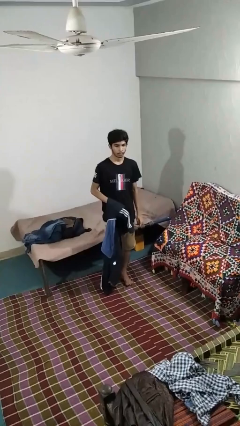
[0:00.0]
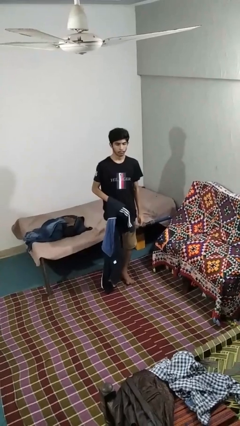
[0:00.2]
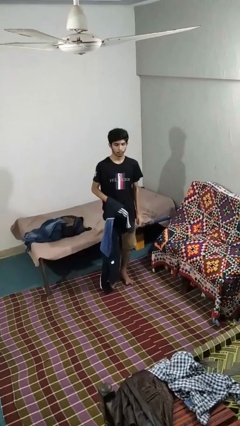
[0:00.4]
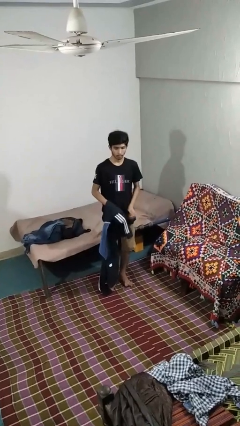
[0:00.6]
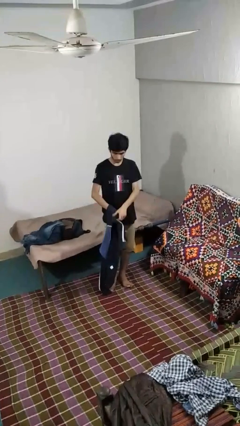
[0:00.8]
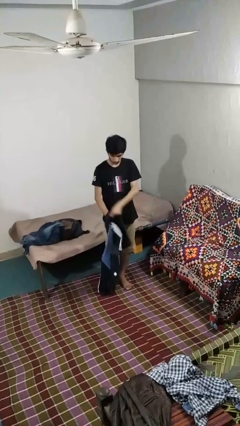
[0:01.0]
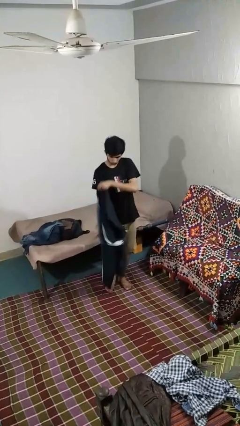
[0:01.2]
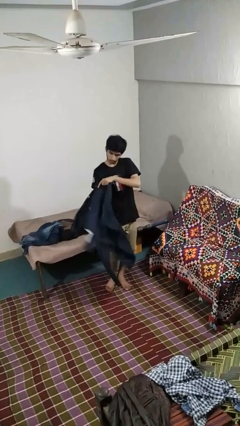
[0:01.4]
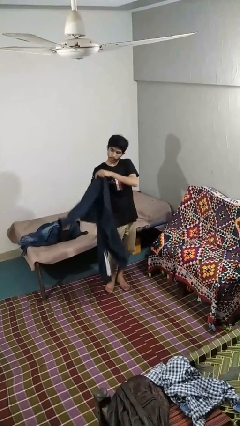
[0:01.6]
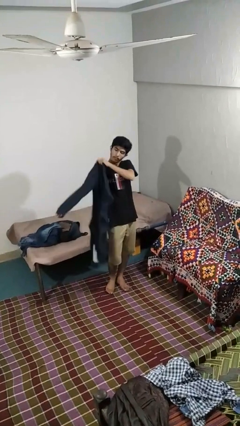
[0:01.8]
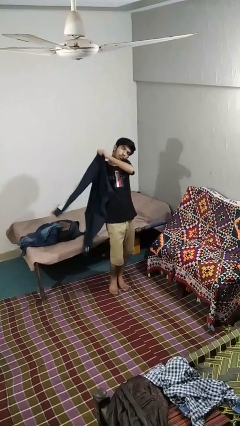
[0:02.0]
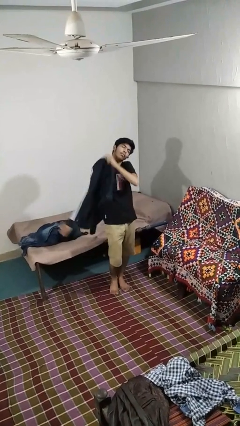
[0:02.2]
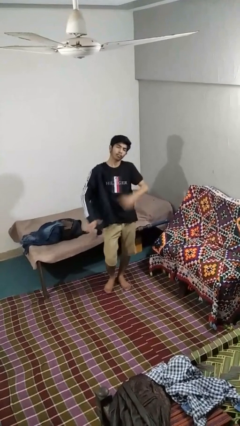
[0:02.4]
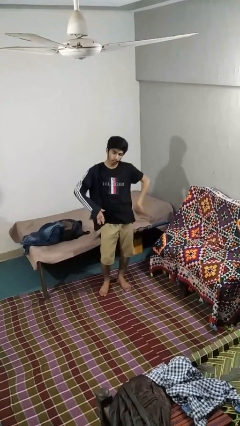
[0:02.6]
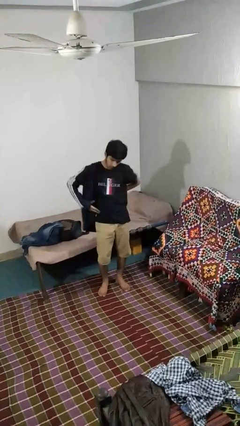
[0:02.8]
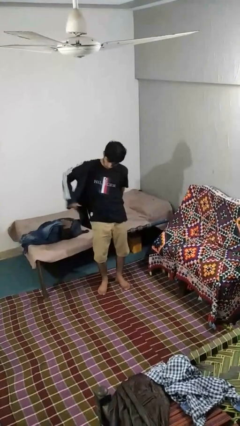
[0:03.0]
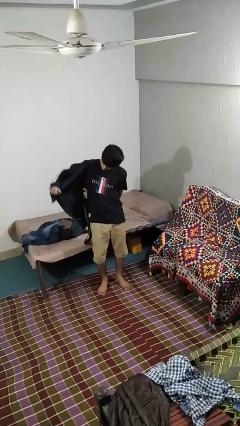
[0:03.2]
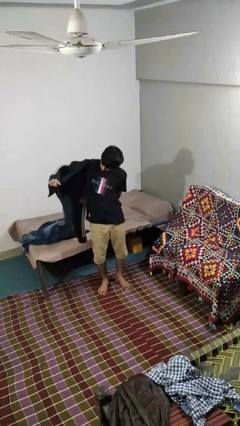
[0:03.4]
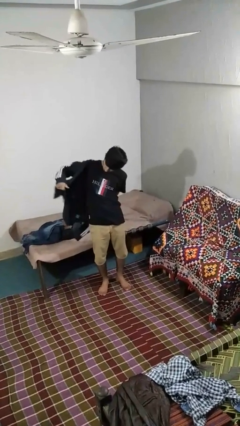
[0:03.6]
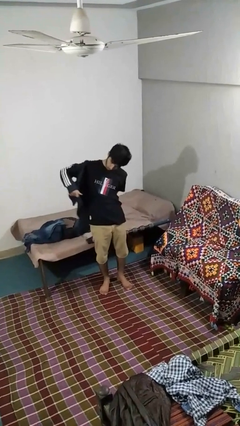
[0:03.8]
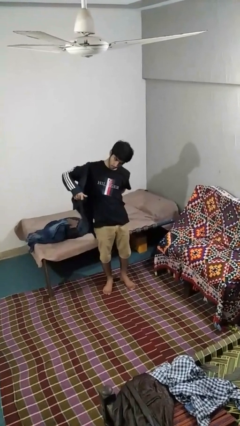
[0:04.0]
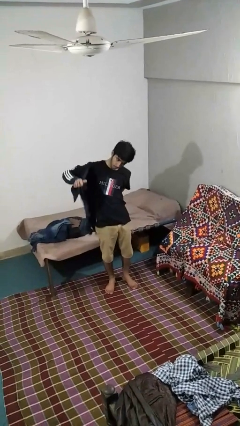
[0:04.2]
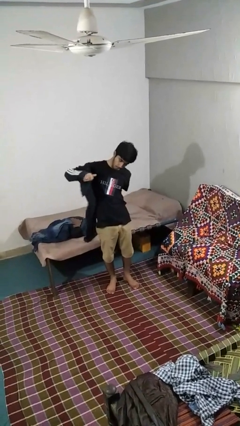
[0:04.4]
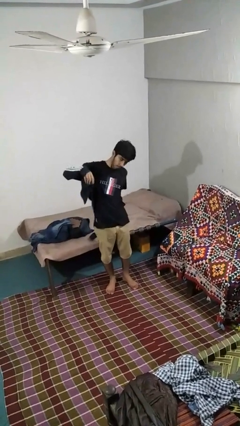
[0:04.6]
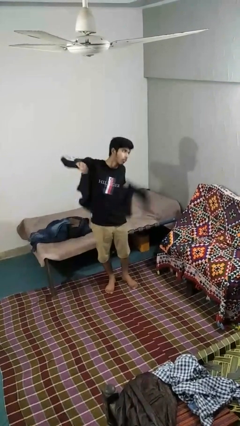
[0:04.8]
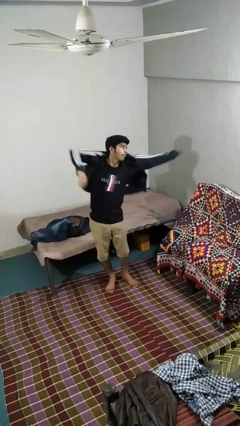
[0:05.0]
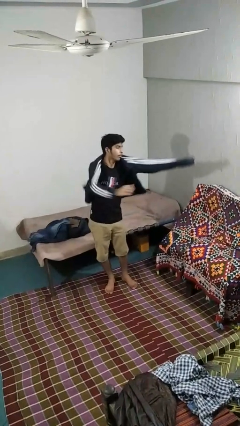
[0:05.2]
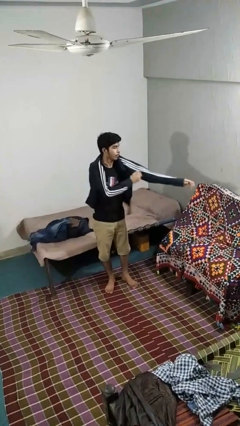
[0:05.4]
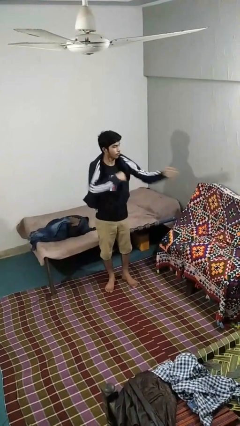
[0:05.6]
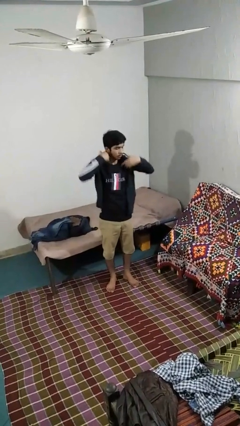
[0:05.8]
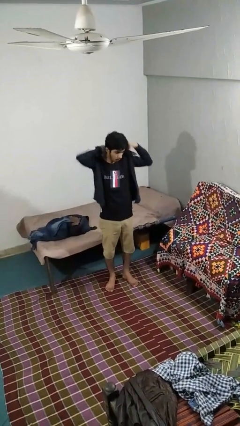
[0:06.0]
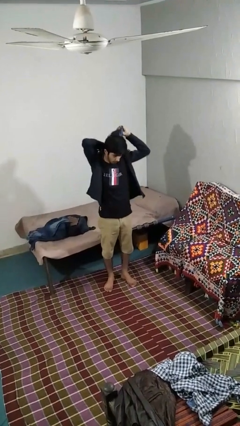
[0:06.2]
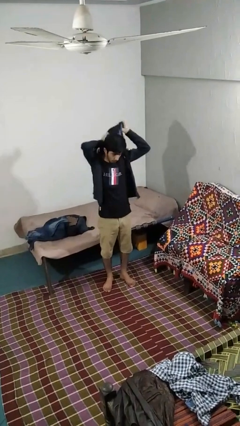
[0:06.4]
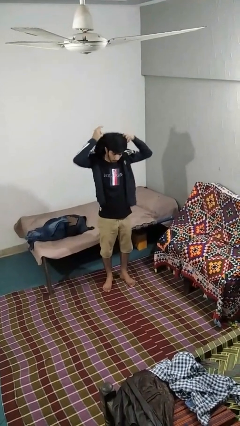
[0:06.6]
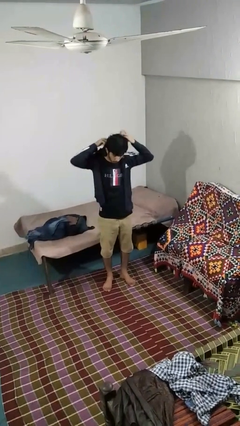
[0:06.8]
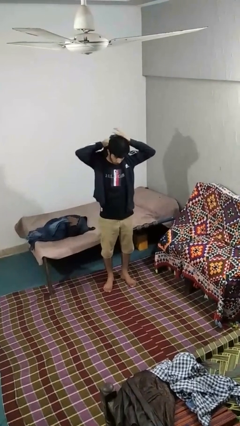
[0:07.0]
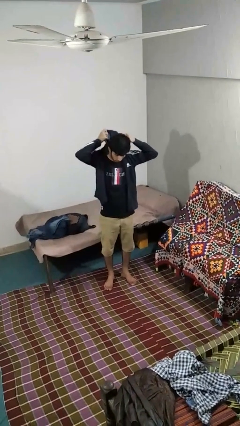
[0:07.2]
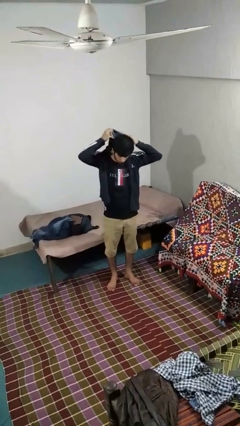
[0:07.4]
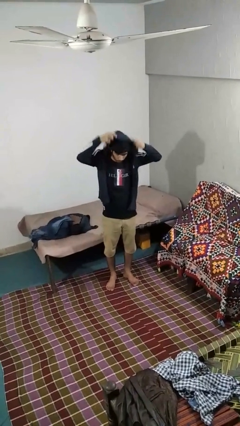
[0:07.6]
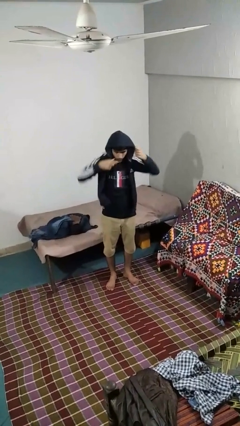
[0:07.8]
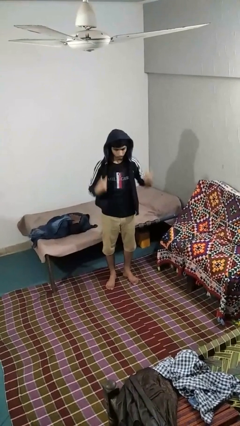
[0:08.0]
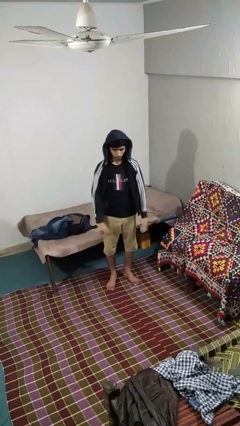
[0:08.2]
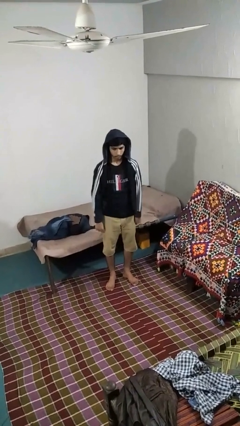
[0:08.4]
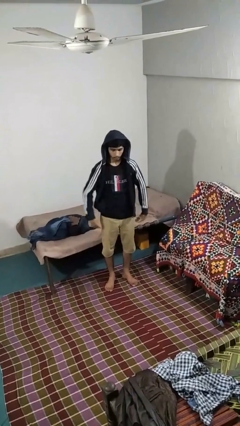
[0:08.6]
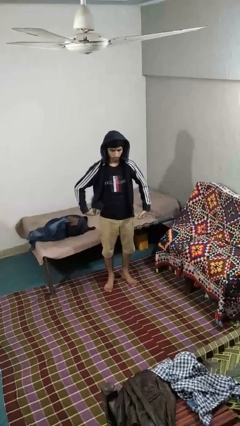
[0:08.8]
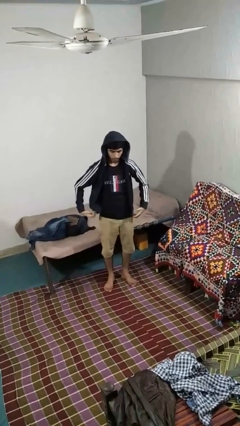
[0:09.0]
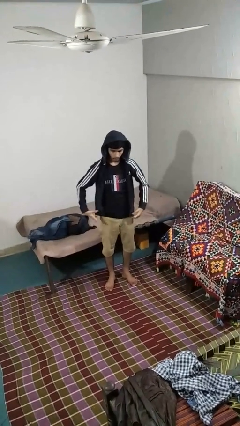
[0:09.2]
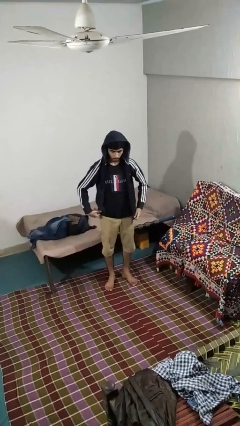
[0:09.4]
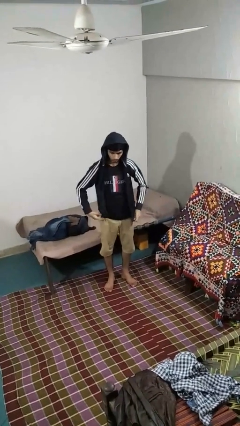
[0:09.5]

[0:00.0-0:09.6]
person puts on hoodie

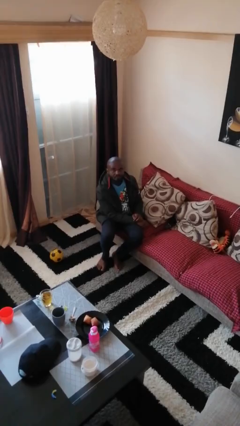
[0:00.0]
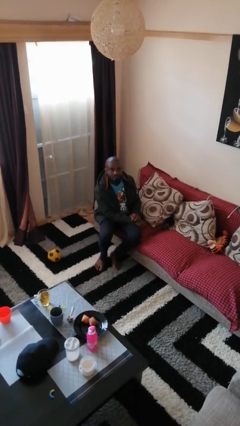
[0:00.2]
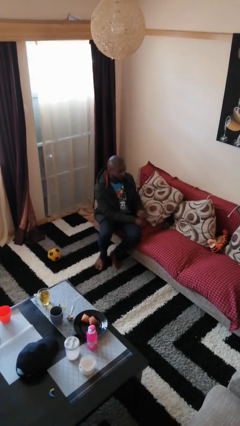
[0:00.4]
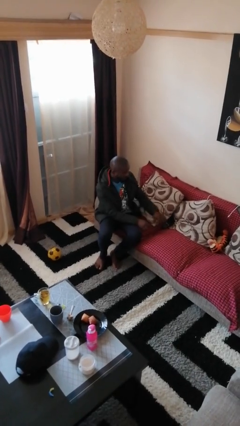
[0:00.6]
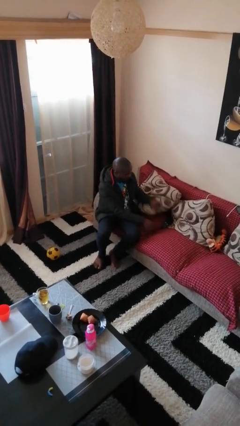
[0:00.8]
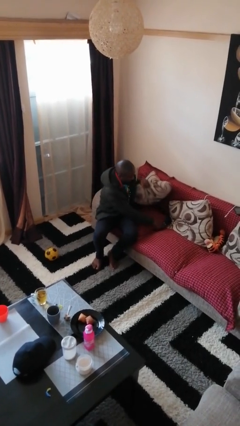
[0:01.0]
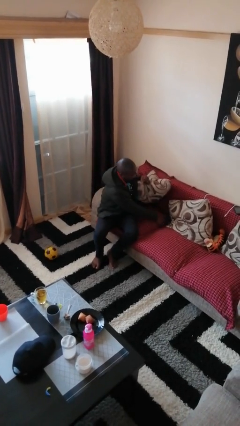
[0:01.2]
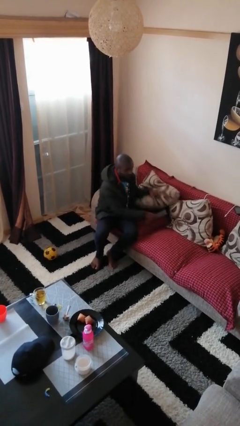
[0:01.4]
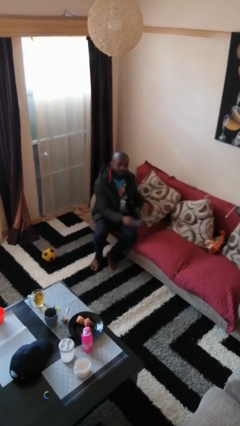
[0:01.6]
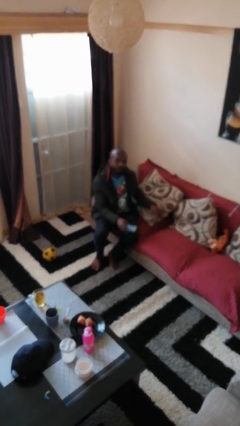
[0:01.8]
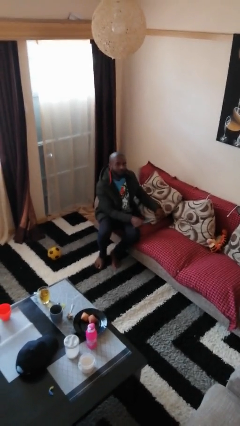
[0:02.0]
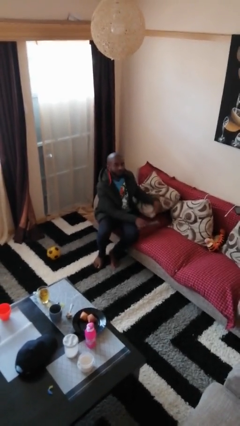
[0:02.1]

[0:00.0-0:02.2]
person searches in couch

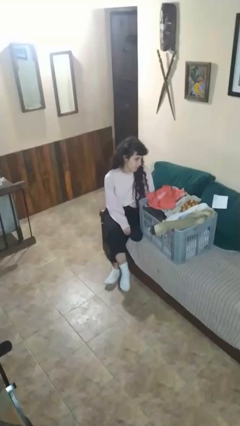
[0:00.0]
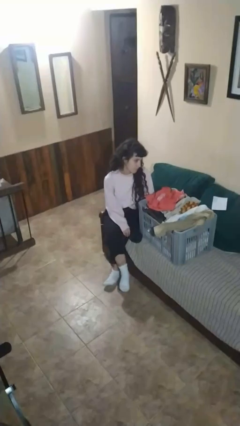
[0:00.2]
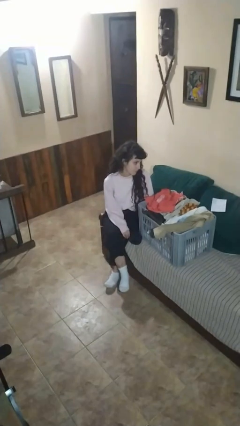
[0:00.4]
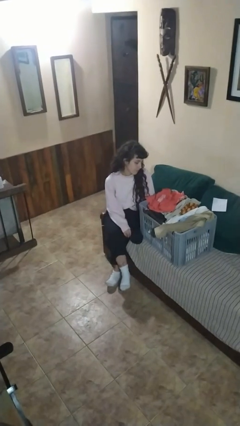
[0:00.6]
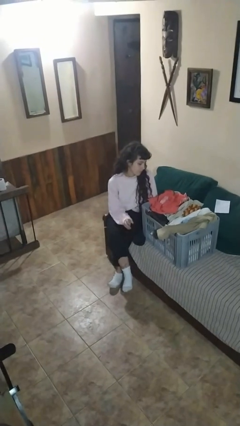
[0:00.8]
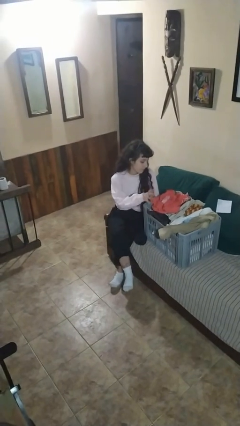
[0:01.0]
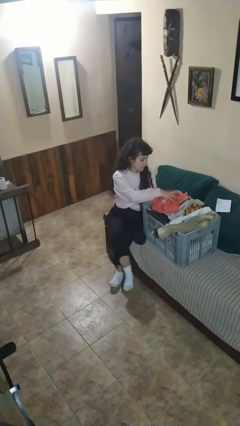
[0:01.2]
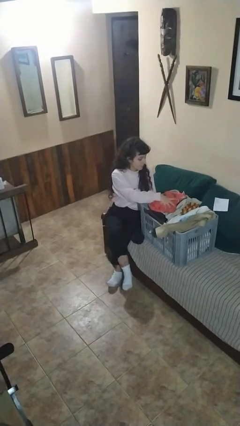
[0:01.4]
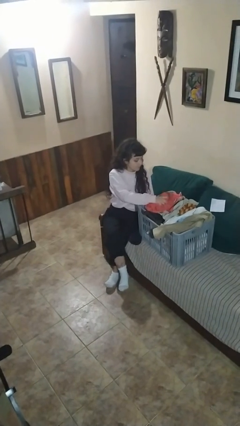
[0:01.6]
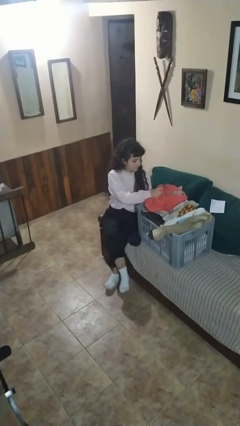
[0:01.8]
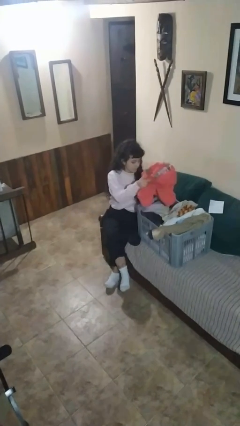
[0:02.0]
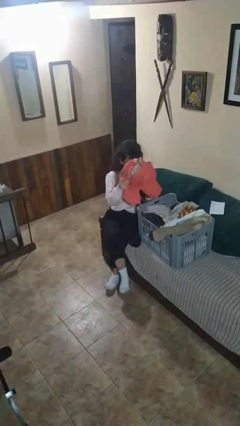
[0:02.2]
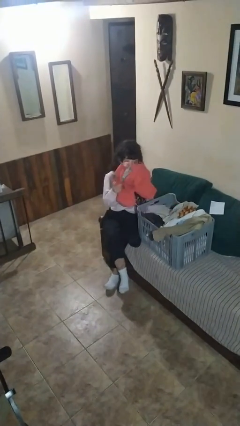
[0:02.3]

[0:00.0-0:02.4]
person takes object from basket

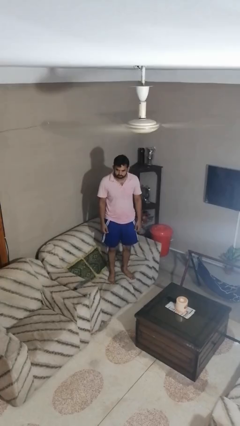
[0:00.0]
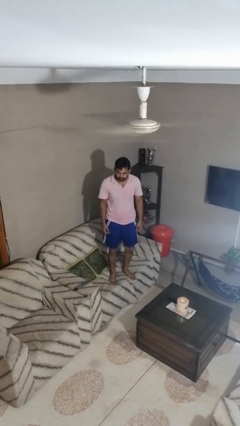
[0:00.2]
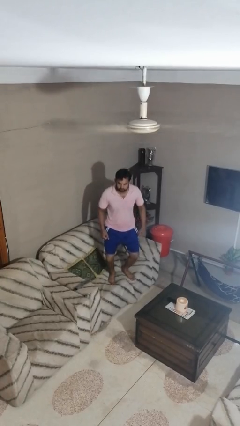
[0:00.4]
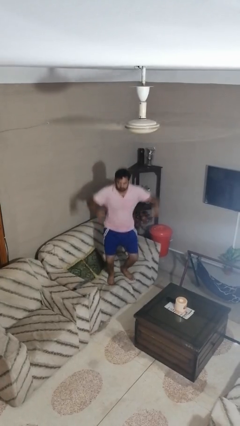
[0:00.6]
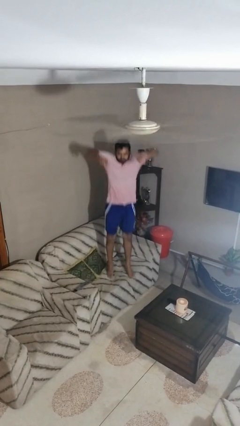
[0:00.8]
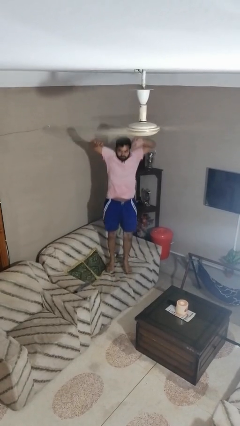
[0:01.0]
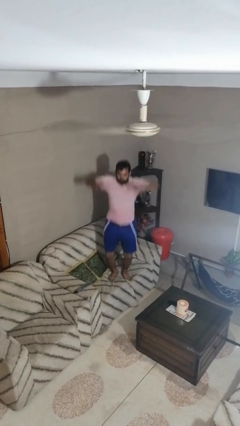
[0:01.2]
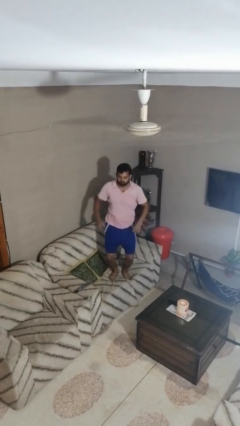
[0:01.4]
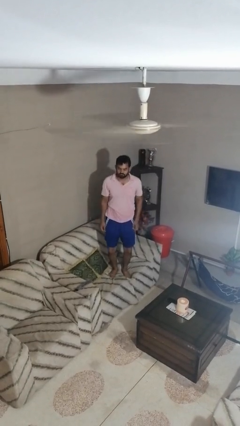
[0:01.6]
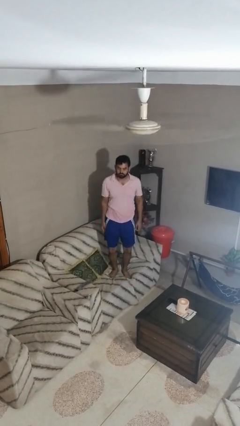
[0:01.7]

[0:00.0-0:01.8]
person jumps on couch

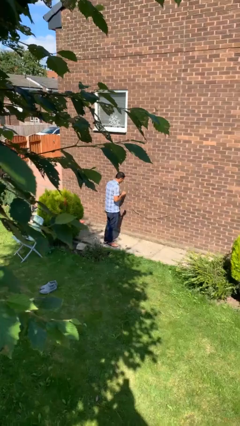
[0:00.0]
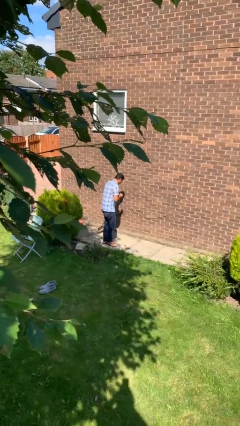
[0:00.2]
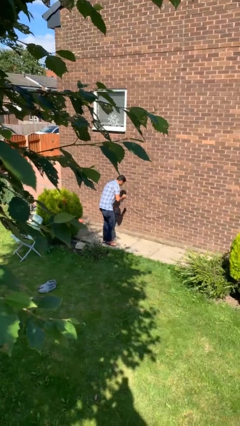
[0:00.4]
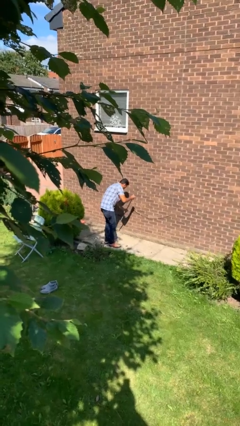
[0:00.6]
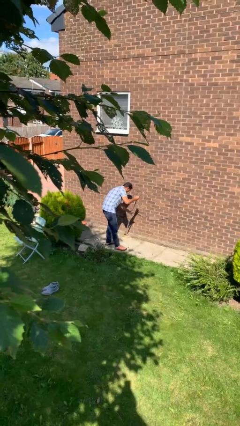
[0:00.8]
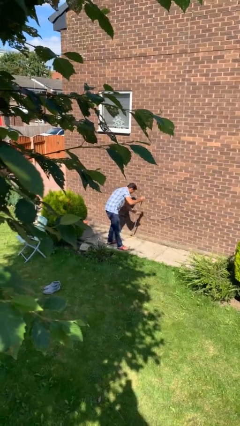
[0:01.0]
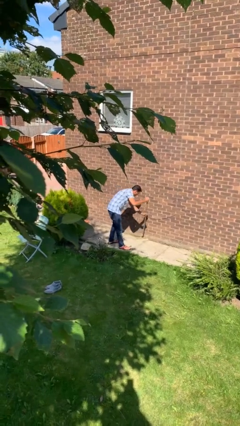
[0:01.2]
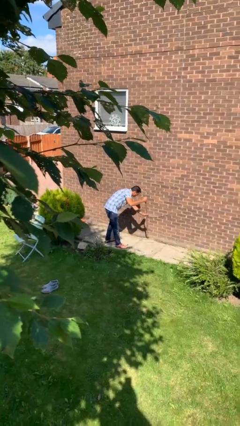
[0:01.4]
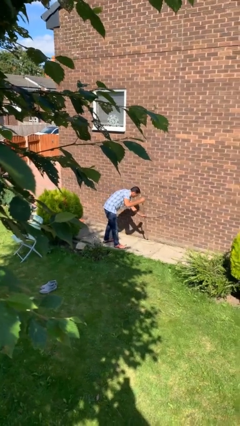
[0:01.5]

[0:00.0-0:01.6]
person sweeps floor
